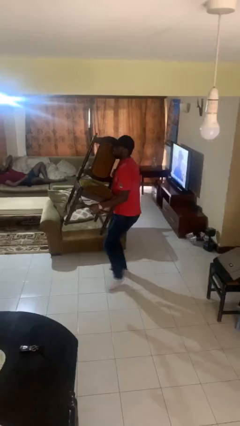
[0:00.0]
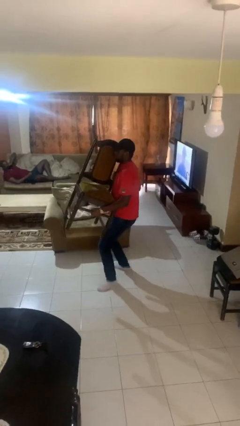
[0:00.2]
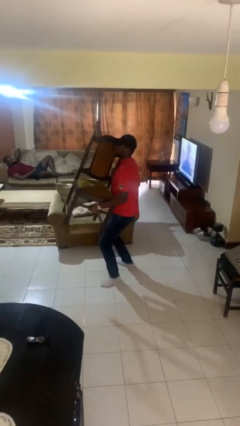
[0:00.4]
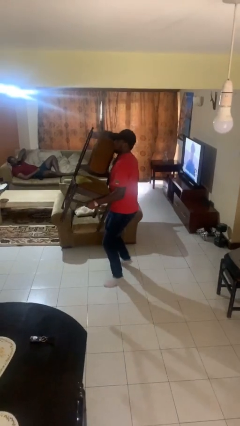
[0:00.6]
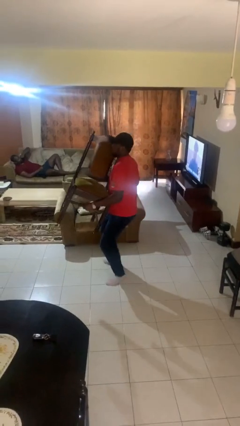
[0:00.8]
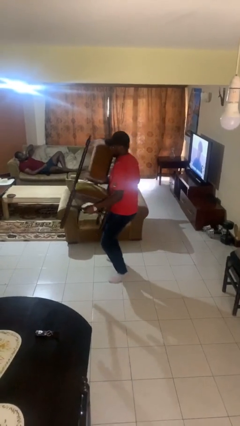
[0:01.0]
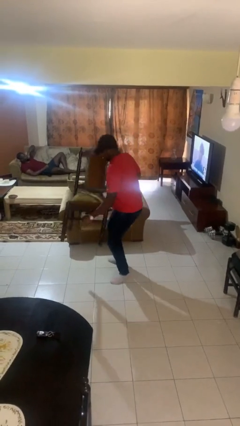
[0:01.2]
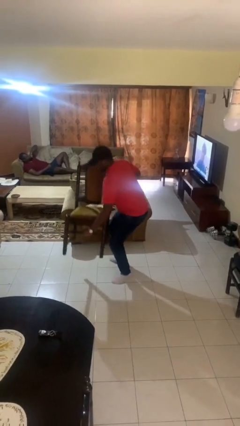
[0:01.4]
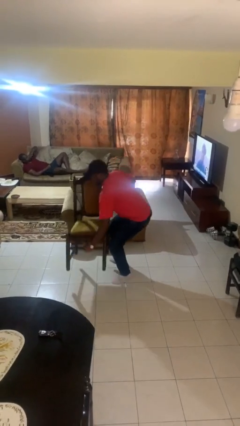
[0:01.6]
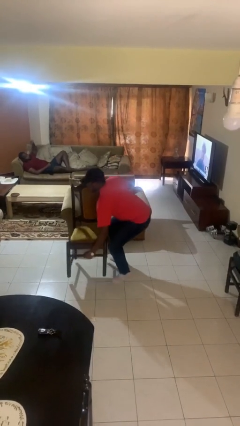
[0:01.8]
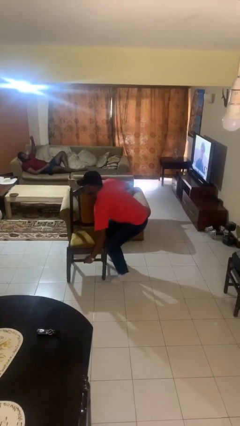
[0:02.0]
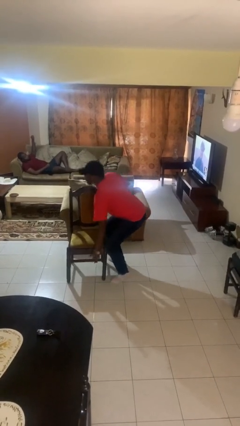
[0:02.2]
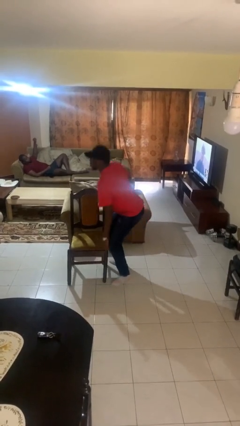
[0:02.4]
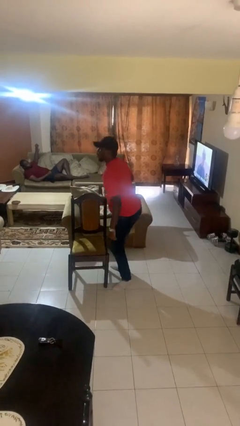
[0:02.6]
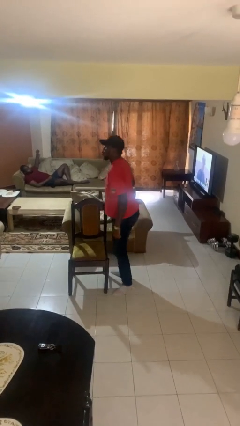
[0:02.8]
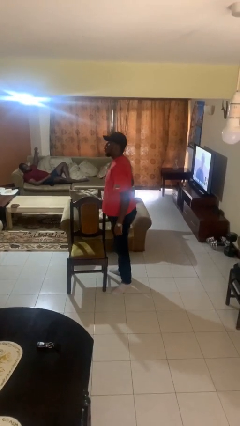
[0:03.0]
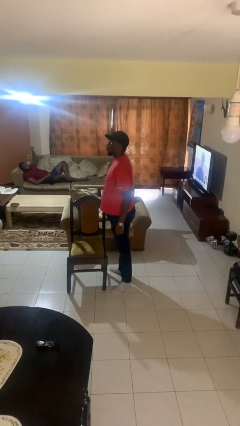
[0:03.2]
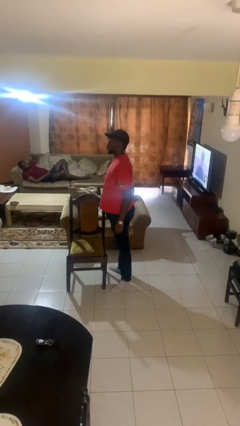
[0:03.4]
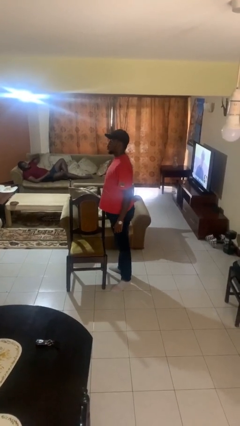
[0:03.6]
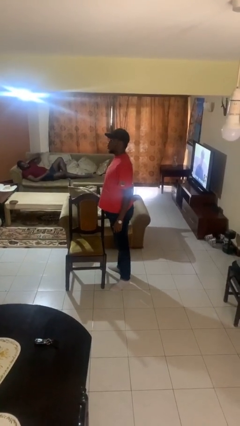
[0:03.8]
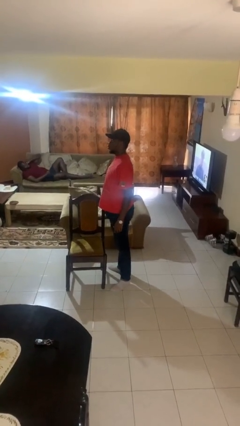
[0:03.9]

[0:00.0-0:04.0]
person puts down object on floor

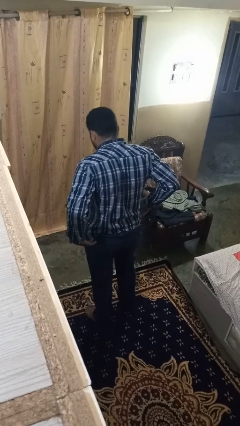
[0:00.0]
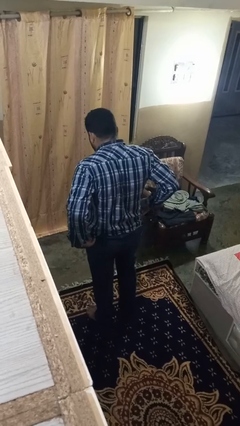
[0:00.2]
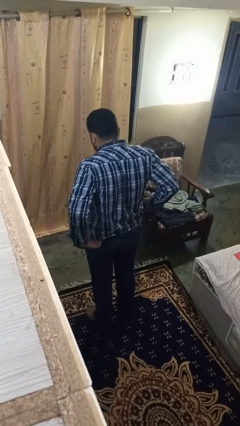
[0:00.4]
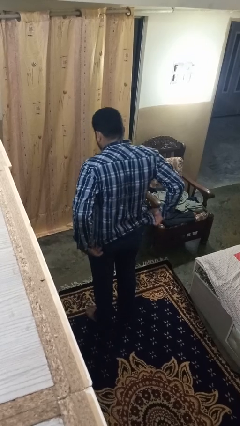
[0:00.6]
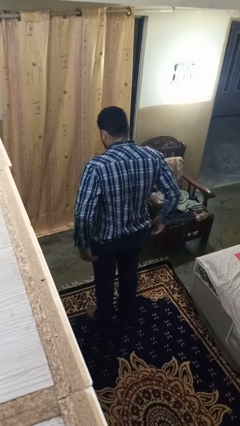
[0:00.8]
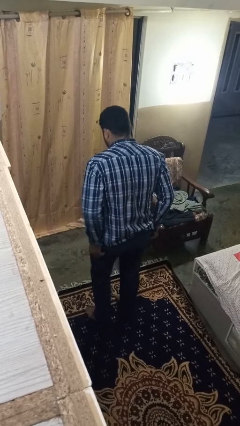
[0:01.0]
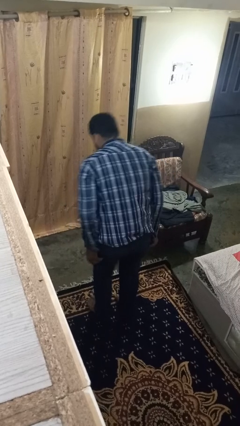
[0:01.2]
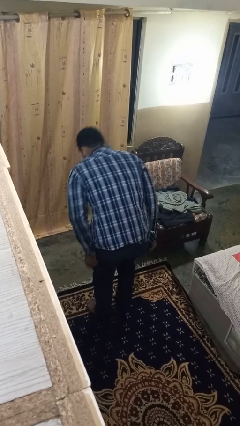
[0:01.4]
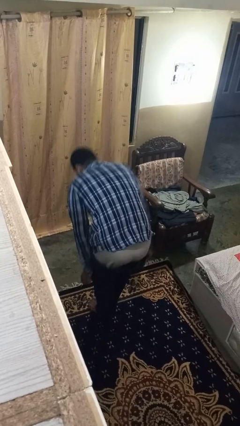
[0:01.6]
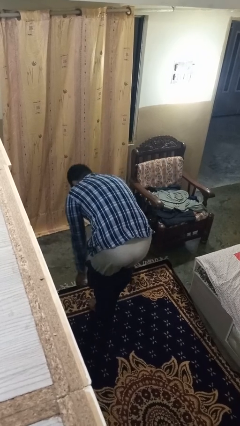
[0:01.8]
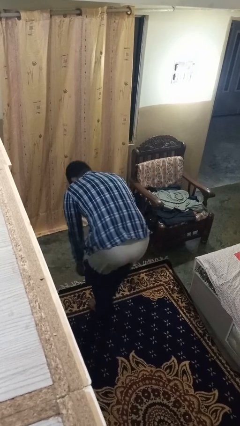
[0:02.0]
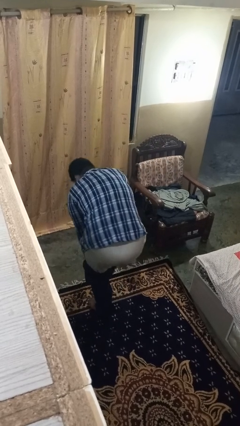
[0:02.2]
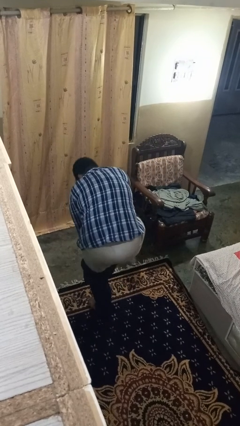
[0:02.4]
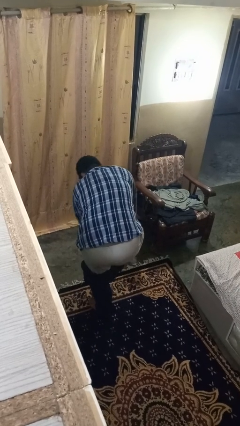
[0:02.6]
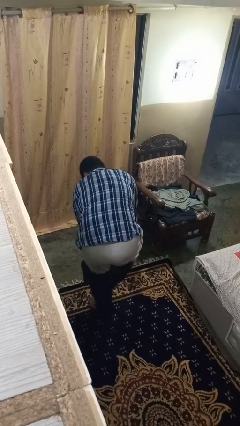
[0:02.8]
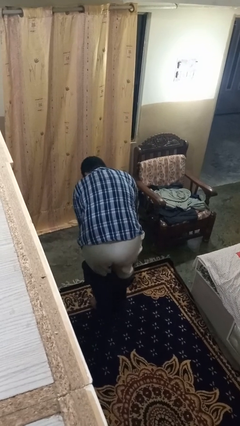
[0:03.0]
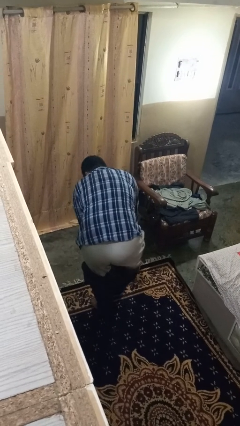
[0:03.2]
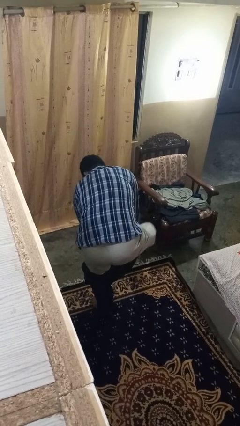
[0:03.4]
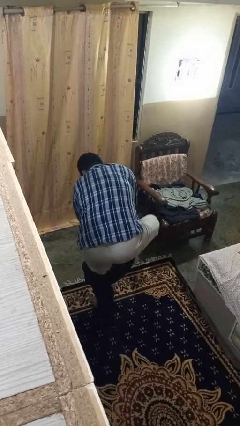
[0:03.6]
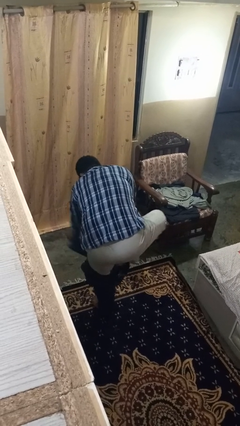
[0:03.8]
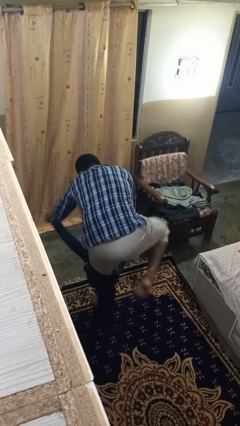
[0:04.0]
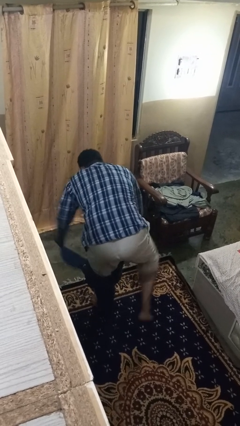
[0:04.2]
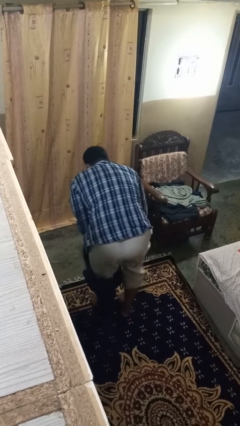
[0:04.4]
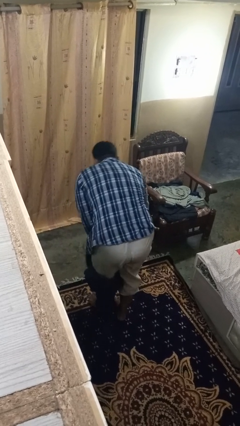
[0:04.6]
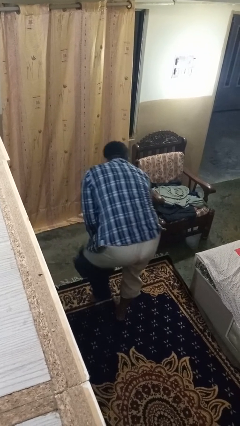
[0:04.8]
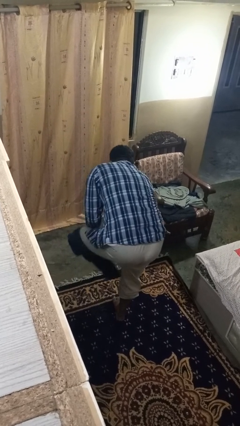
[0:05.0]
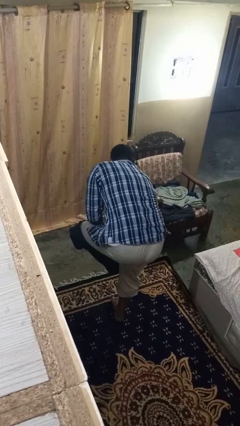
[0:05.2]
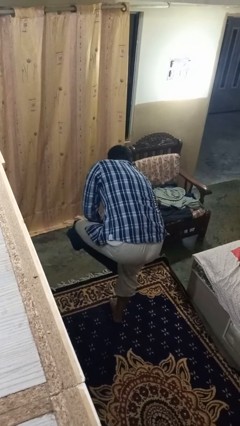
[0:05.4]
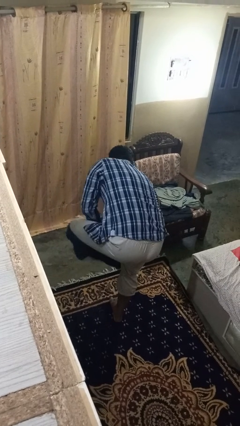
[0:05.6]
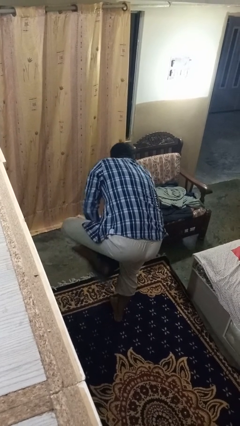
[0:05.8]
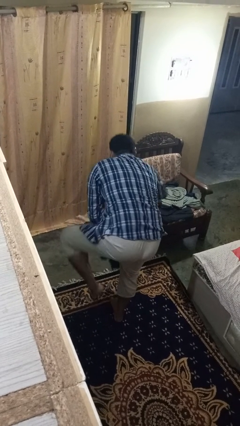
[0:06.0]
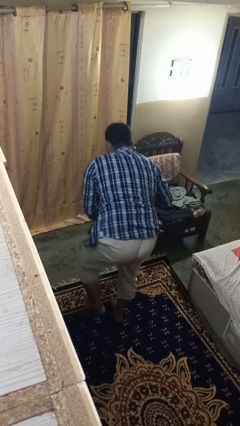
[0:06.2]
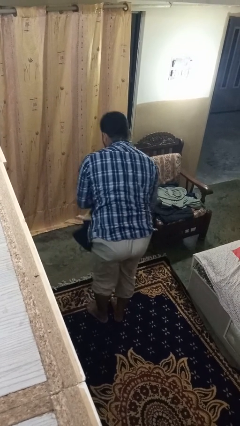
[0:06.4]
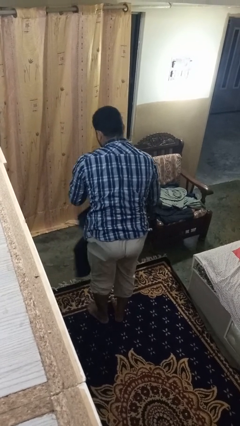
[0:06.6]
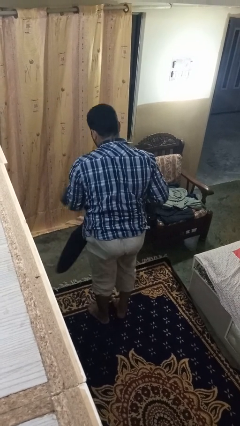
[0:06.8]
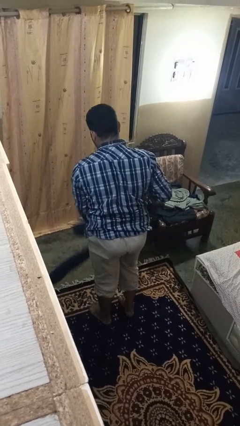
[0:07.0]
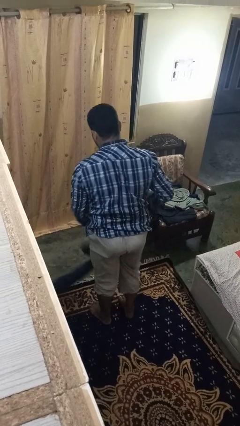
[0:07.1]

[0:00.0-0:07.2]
person takes off pants

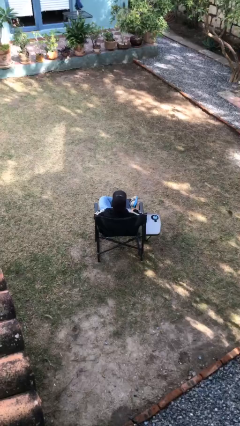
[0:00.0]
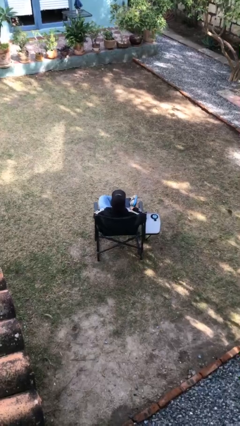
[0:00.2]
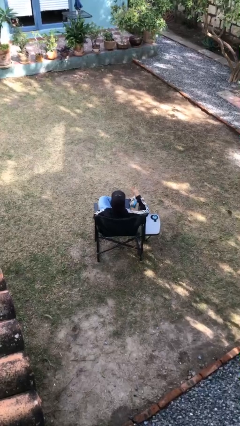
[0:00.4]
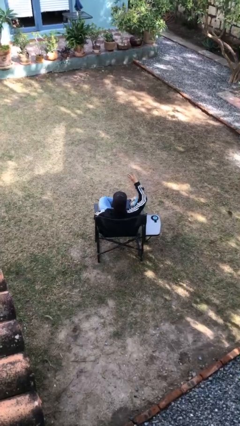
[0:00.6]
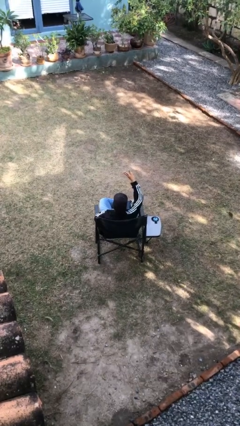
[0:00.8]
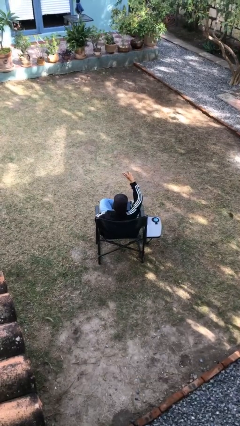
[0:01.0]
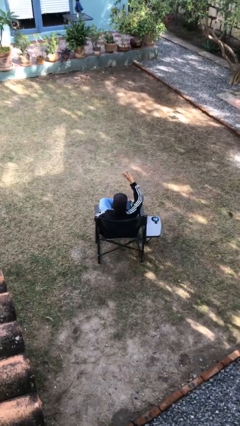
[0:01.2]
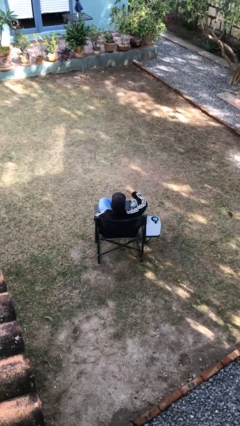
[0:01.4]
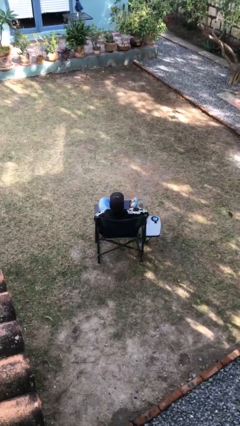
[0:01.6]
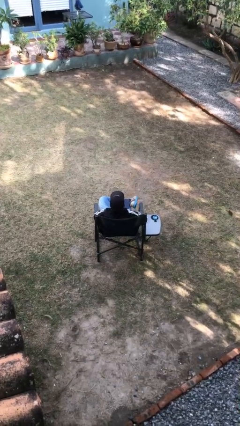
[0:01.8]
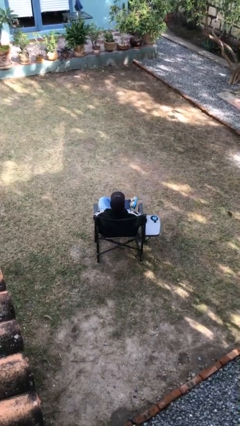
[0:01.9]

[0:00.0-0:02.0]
person gestures number three

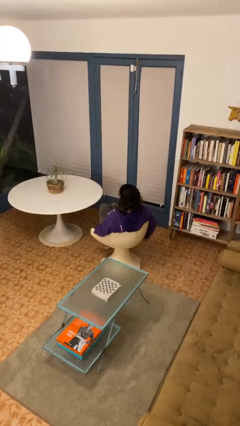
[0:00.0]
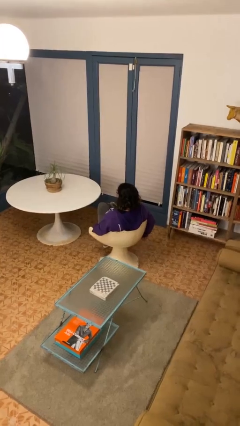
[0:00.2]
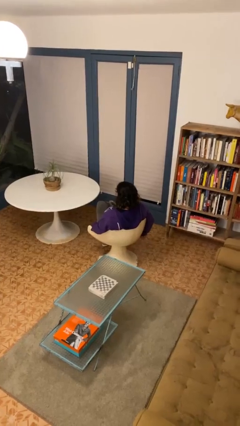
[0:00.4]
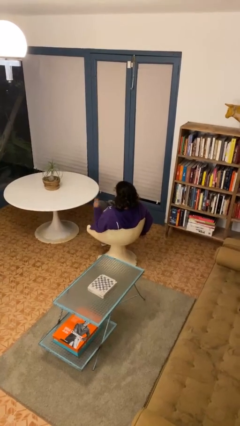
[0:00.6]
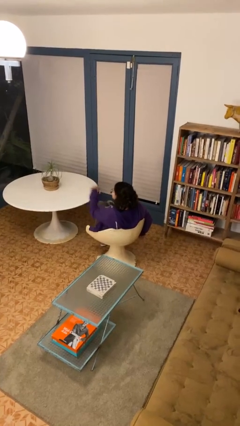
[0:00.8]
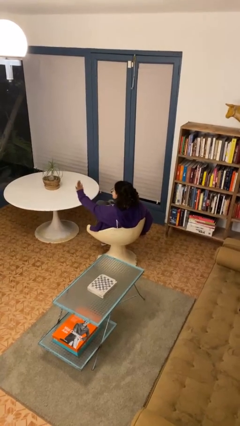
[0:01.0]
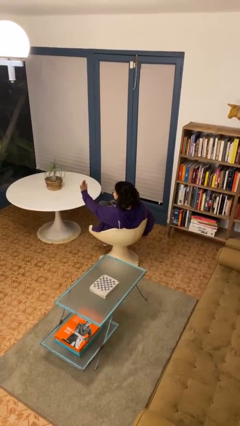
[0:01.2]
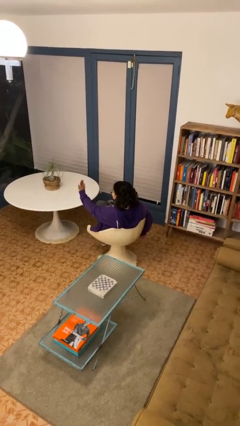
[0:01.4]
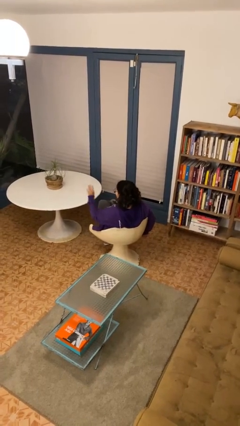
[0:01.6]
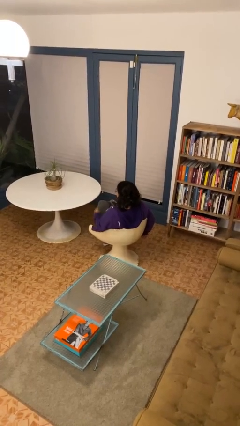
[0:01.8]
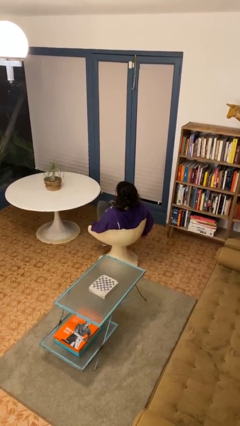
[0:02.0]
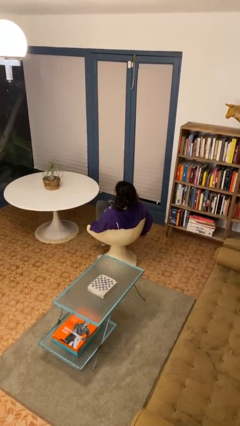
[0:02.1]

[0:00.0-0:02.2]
person gestures stop

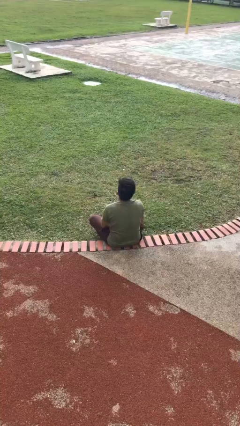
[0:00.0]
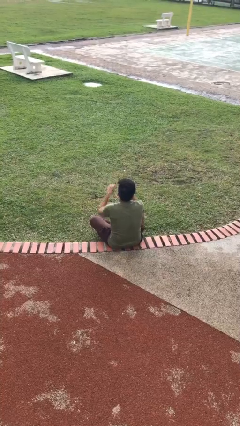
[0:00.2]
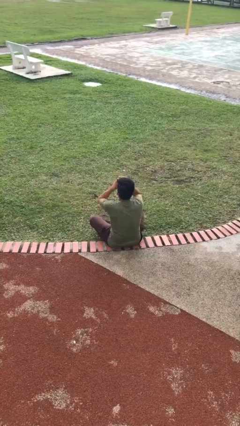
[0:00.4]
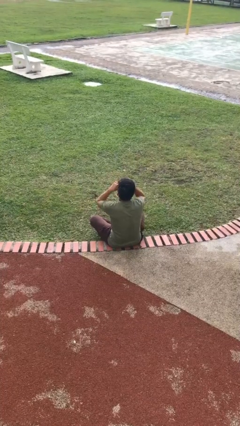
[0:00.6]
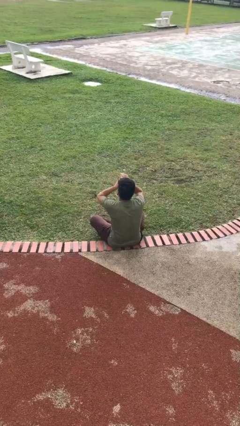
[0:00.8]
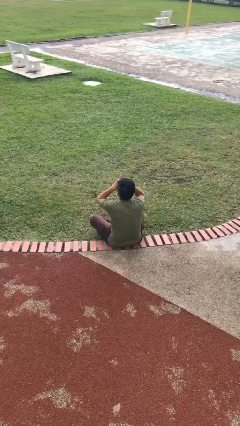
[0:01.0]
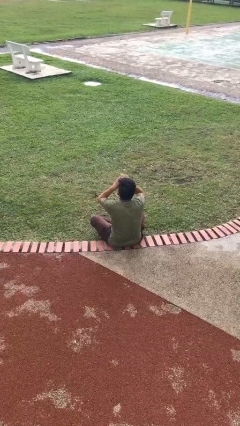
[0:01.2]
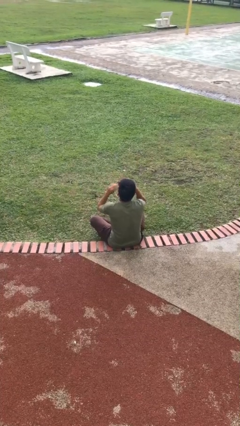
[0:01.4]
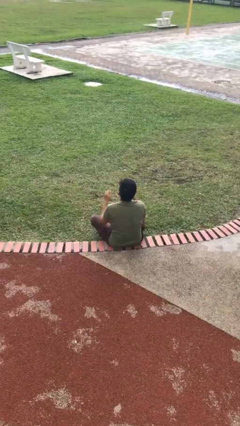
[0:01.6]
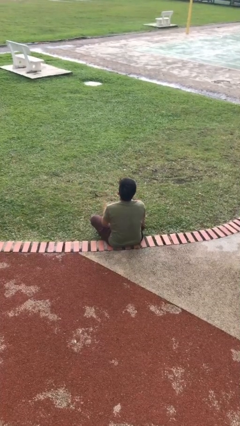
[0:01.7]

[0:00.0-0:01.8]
person rubs eyes

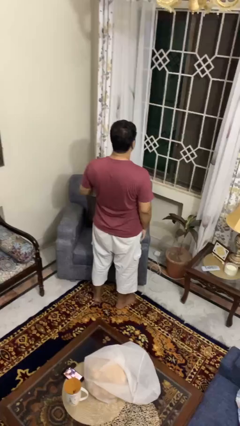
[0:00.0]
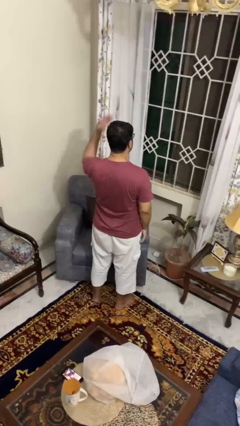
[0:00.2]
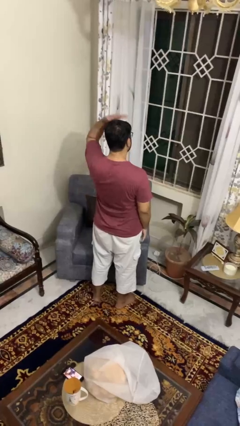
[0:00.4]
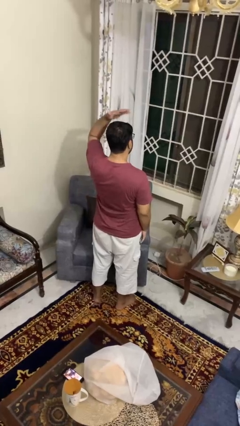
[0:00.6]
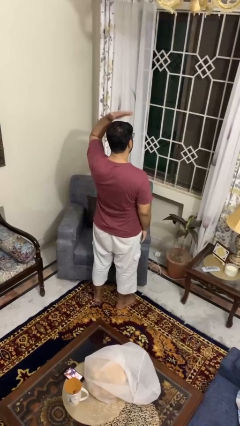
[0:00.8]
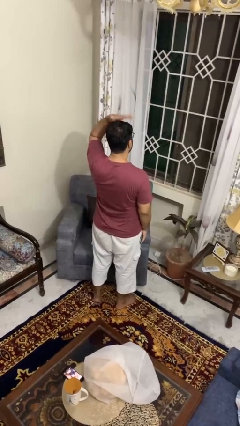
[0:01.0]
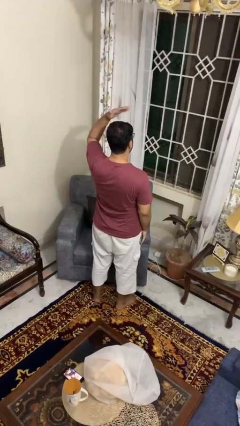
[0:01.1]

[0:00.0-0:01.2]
person pats head
